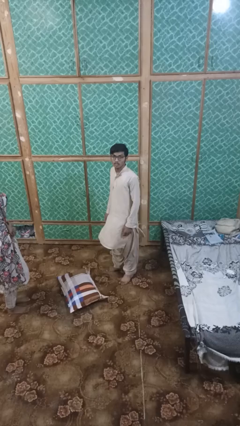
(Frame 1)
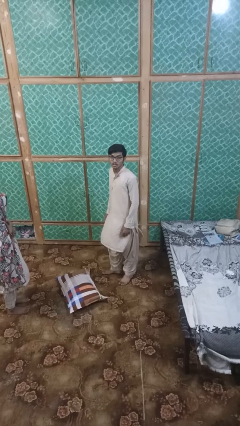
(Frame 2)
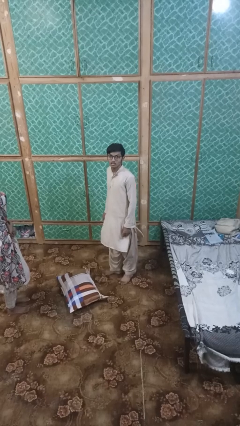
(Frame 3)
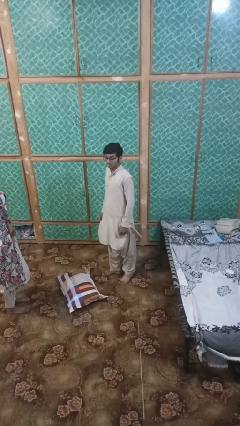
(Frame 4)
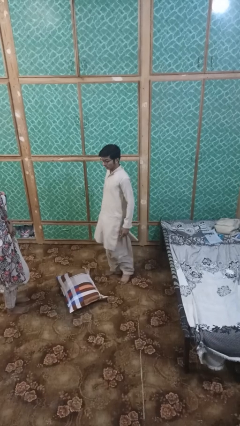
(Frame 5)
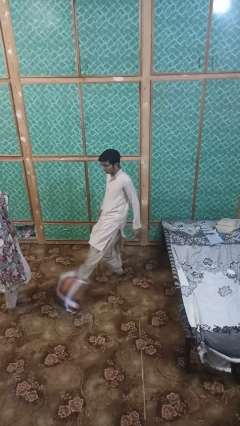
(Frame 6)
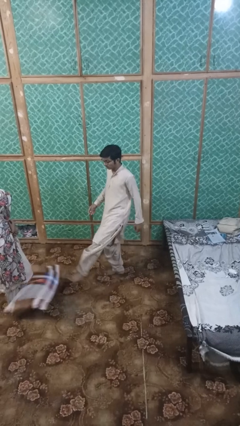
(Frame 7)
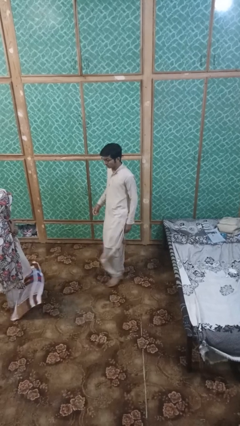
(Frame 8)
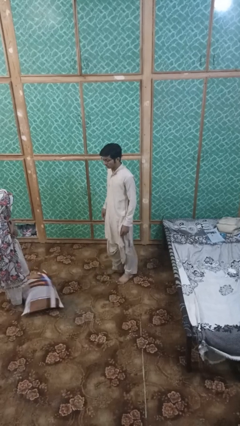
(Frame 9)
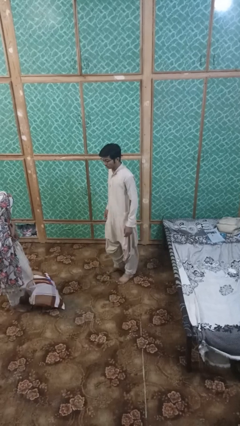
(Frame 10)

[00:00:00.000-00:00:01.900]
person kicks object to person

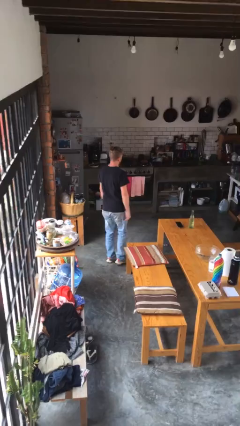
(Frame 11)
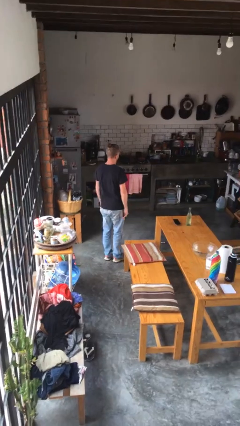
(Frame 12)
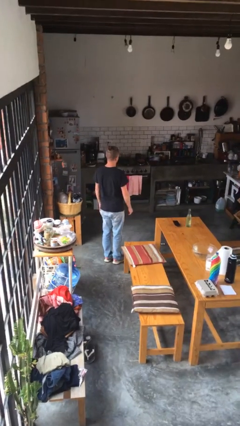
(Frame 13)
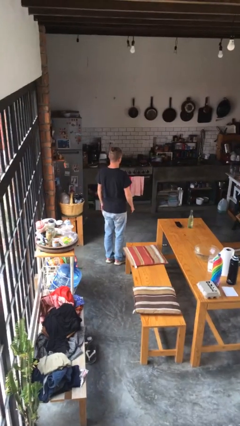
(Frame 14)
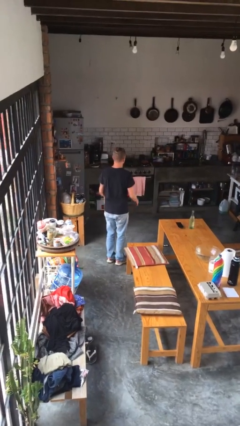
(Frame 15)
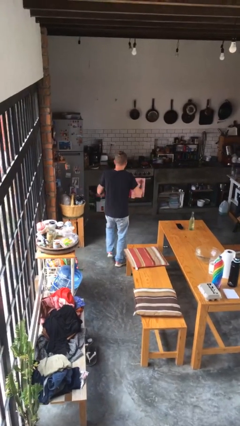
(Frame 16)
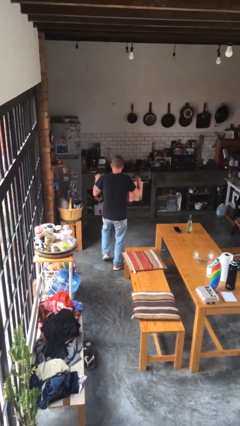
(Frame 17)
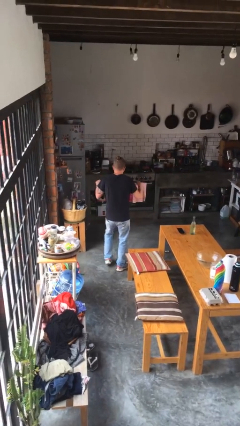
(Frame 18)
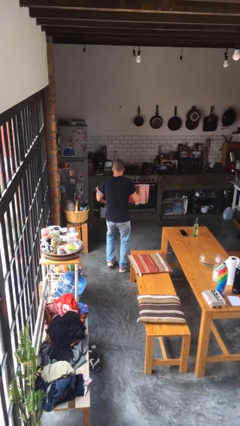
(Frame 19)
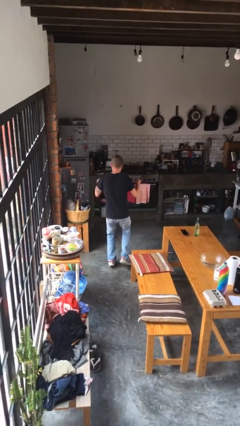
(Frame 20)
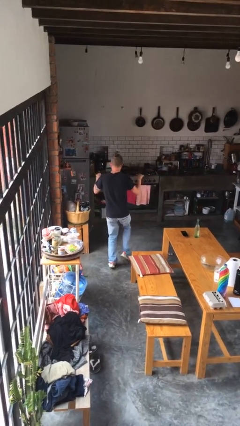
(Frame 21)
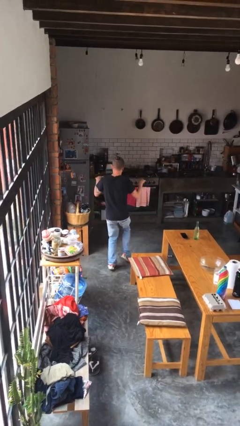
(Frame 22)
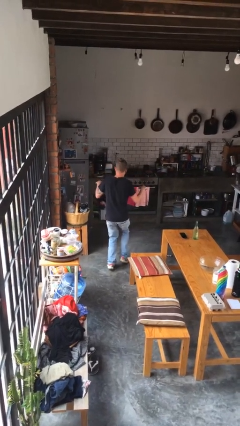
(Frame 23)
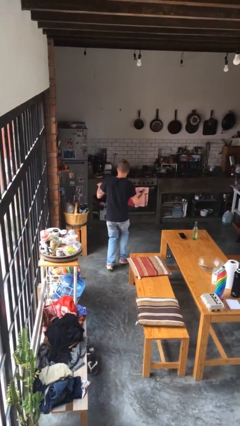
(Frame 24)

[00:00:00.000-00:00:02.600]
person walks tiptoe

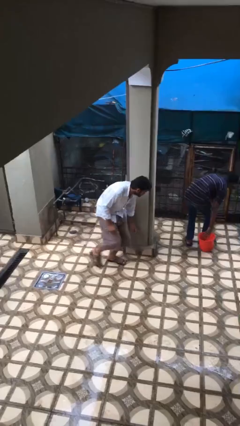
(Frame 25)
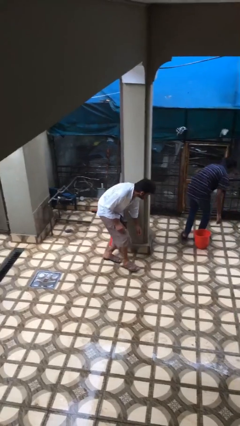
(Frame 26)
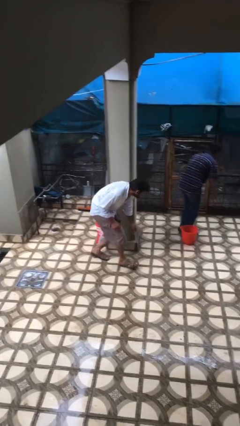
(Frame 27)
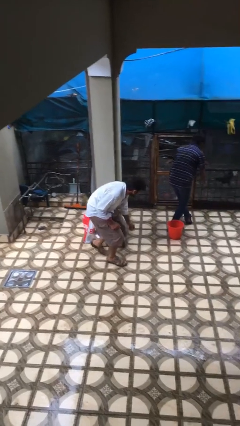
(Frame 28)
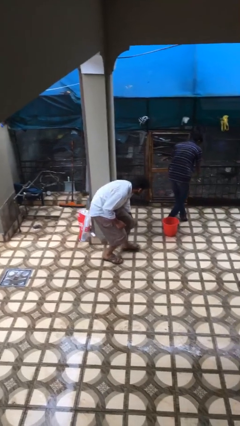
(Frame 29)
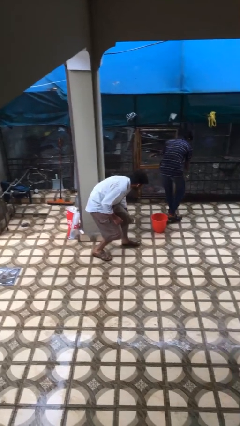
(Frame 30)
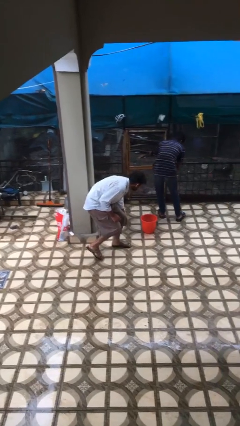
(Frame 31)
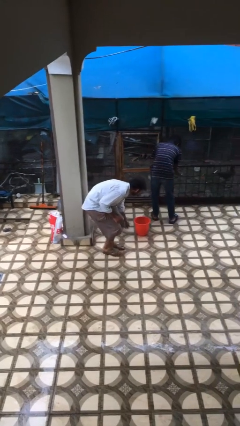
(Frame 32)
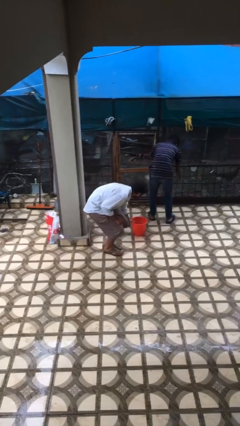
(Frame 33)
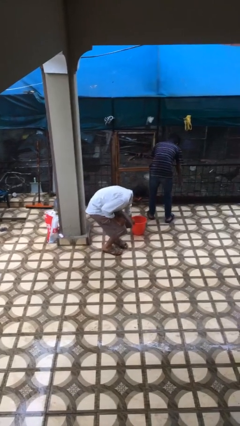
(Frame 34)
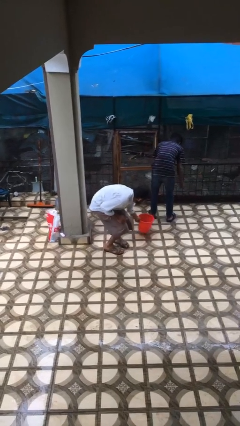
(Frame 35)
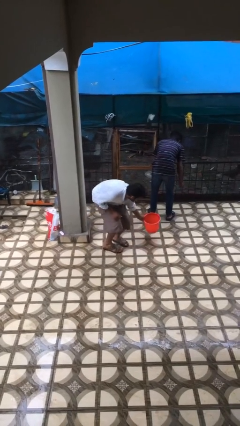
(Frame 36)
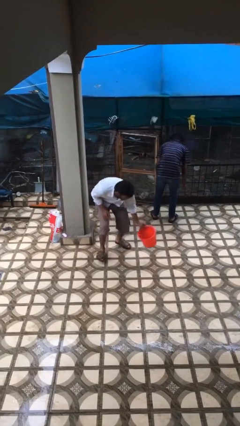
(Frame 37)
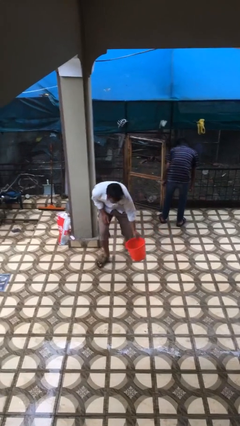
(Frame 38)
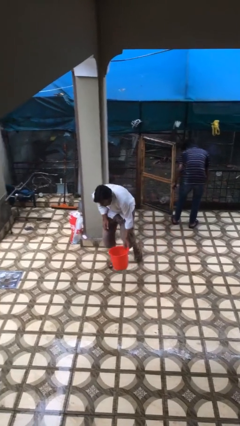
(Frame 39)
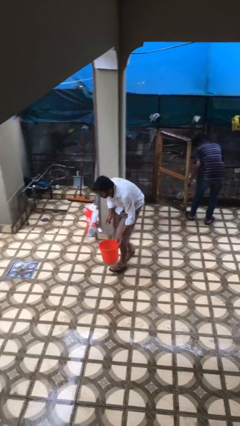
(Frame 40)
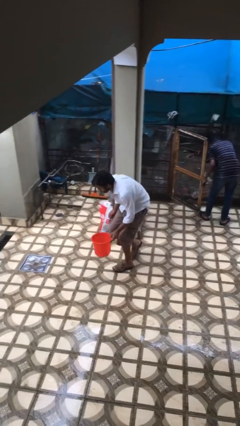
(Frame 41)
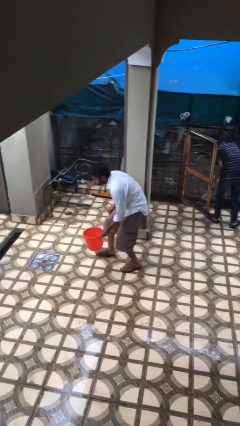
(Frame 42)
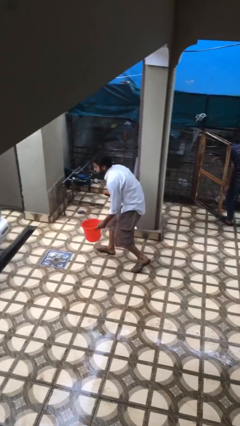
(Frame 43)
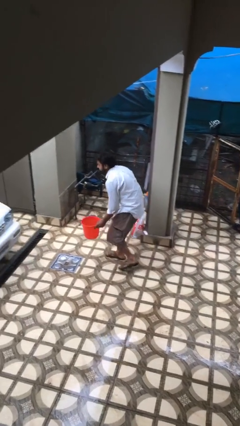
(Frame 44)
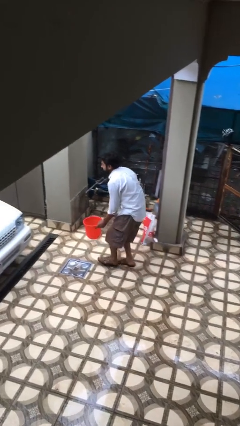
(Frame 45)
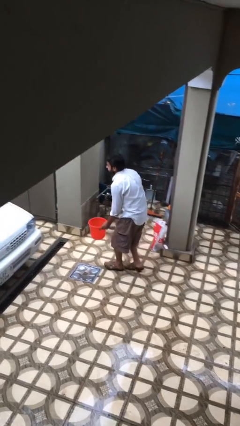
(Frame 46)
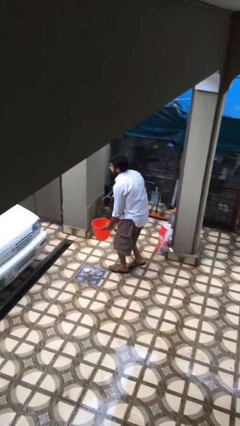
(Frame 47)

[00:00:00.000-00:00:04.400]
person steals object from person

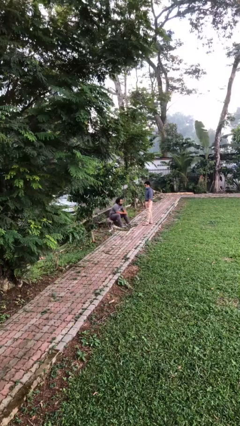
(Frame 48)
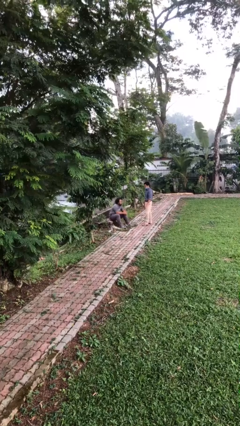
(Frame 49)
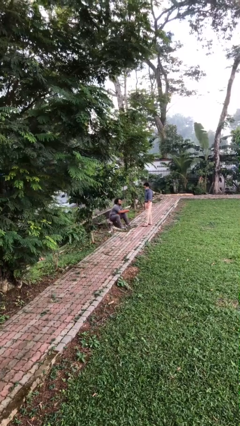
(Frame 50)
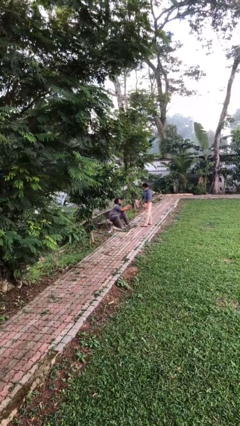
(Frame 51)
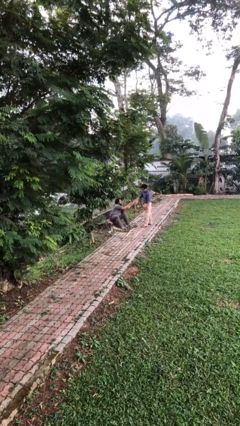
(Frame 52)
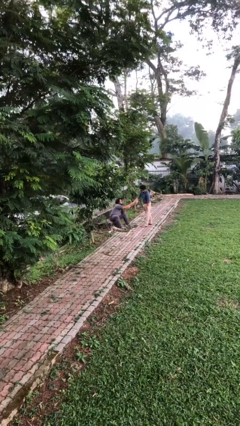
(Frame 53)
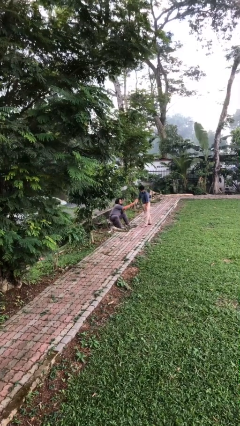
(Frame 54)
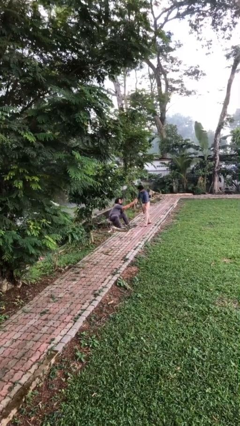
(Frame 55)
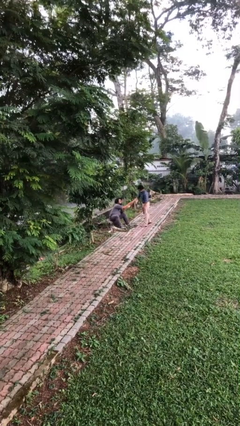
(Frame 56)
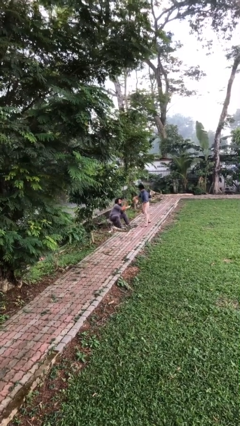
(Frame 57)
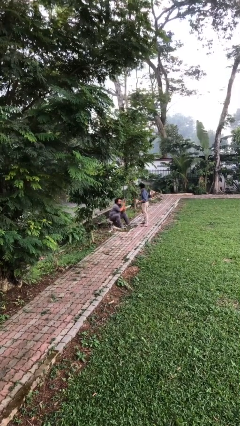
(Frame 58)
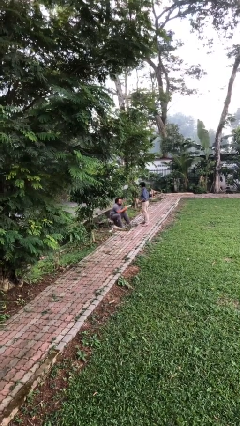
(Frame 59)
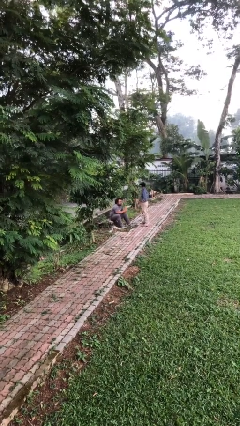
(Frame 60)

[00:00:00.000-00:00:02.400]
person shakes hand

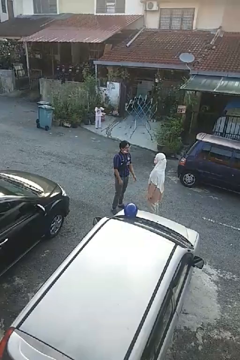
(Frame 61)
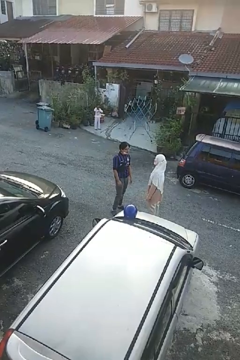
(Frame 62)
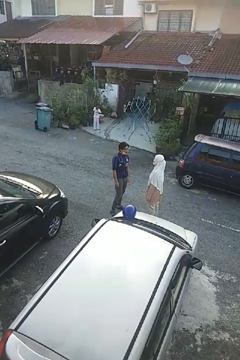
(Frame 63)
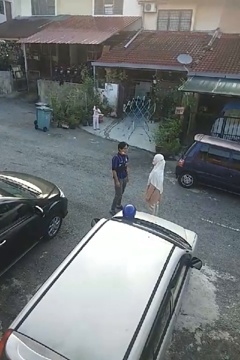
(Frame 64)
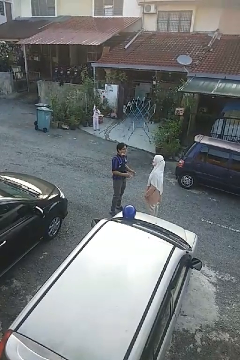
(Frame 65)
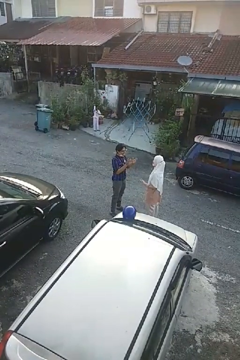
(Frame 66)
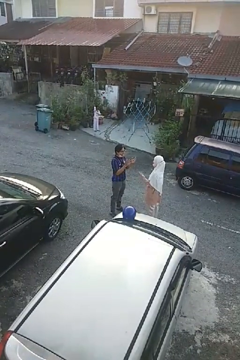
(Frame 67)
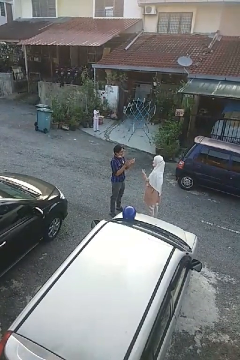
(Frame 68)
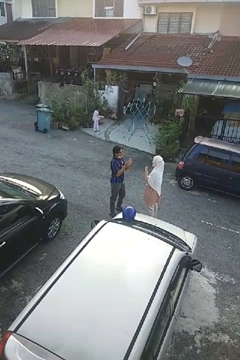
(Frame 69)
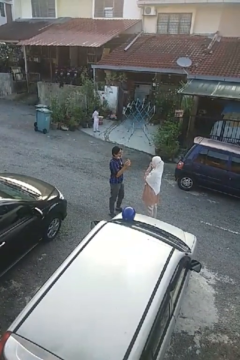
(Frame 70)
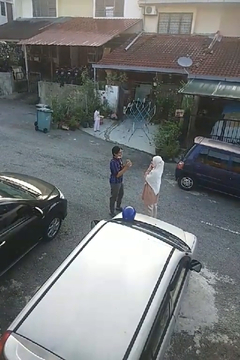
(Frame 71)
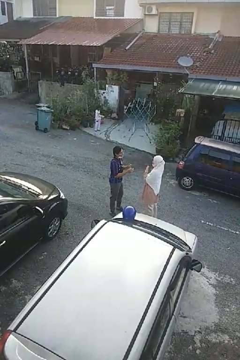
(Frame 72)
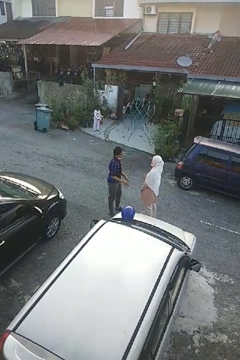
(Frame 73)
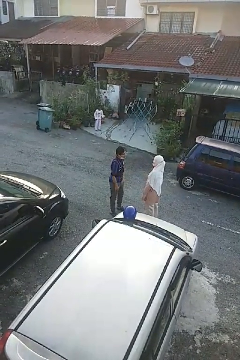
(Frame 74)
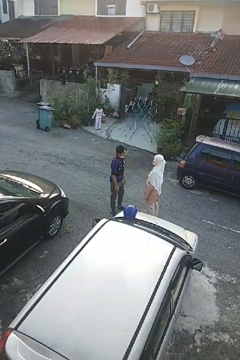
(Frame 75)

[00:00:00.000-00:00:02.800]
person laughs with person

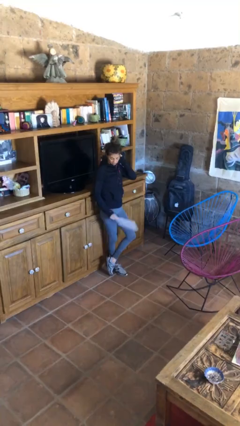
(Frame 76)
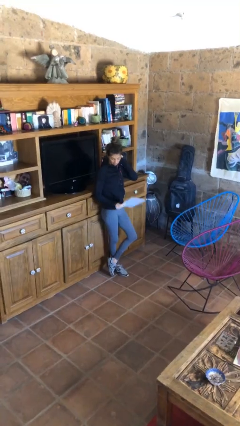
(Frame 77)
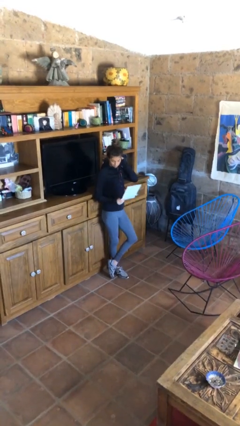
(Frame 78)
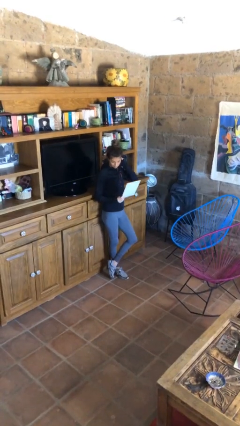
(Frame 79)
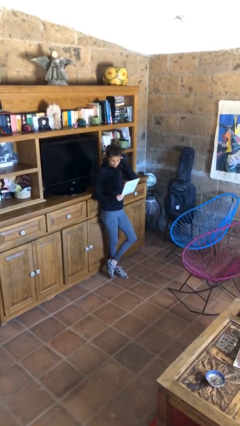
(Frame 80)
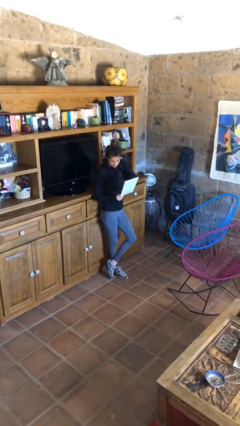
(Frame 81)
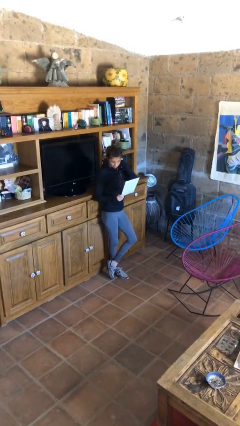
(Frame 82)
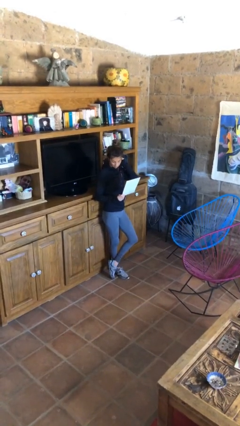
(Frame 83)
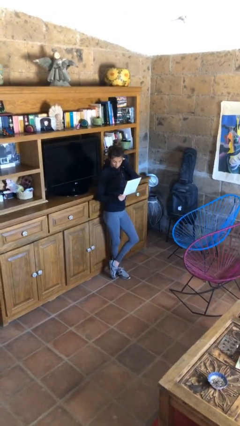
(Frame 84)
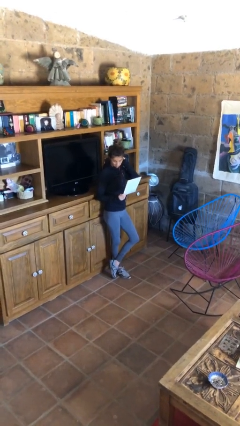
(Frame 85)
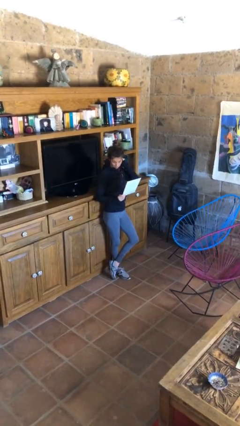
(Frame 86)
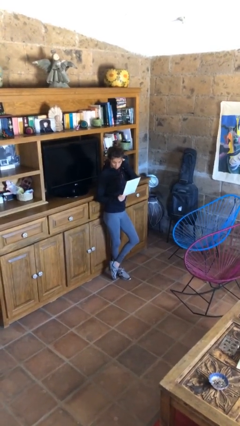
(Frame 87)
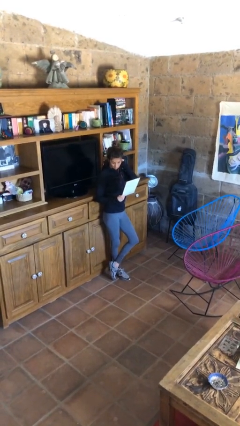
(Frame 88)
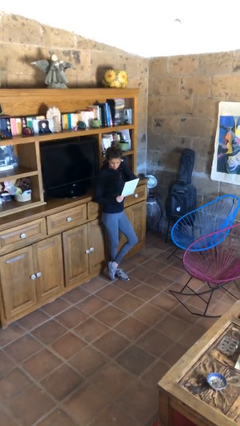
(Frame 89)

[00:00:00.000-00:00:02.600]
person reads document

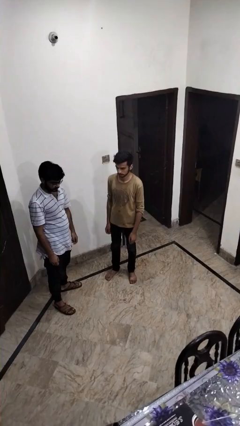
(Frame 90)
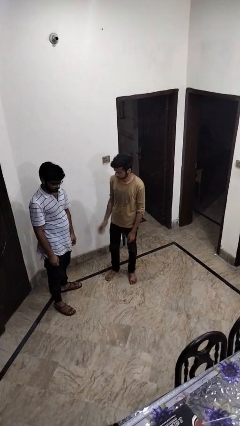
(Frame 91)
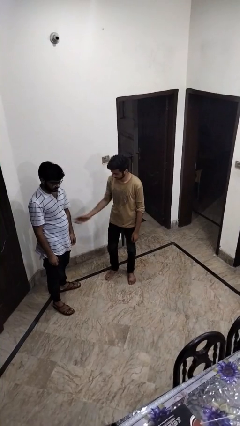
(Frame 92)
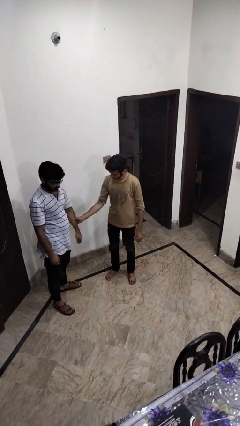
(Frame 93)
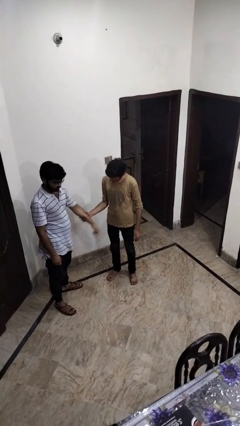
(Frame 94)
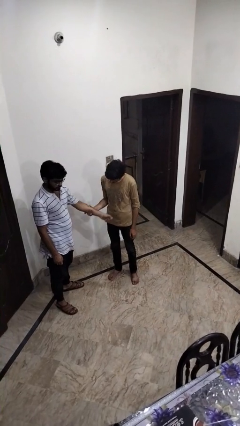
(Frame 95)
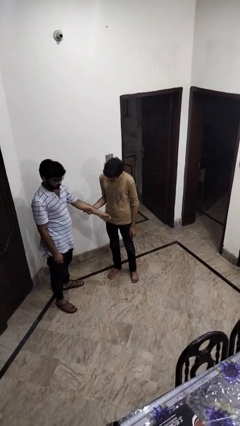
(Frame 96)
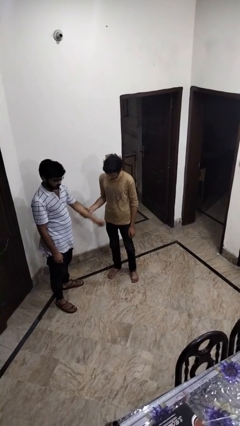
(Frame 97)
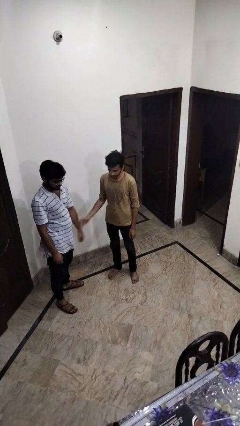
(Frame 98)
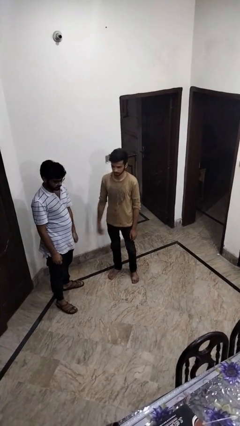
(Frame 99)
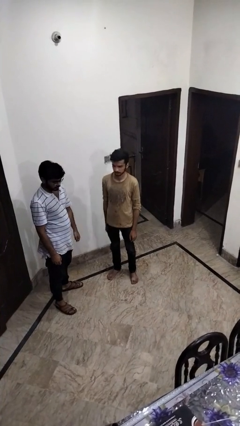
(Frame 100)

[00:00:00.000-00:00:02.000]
person grabs person by forearm
